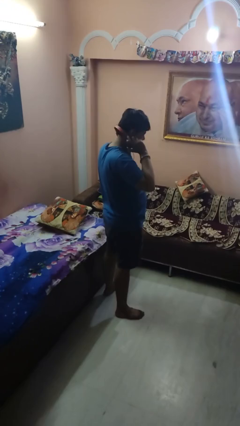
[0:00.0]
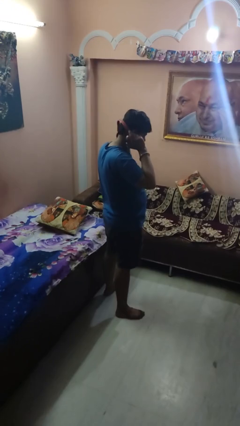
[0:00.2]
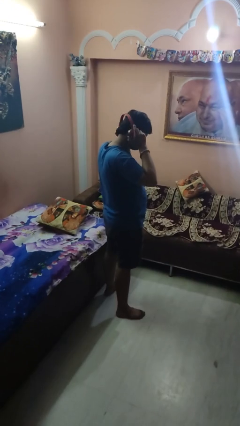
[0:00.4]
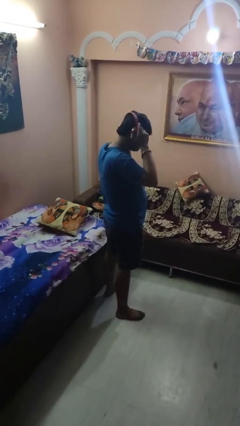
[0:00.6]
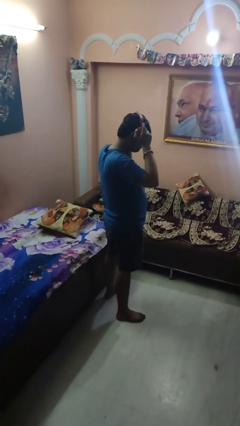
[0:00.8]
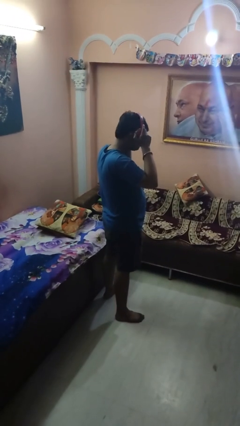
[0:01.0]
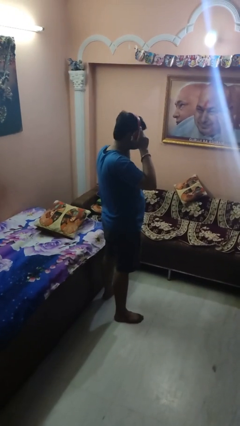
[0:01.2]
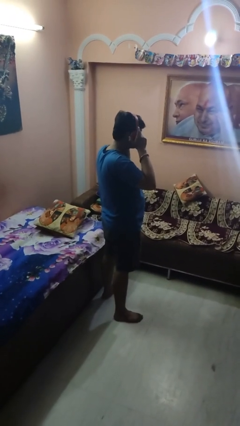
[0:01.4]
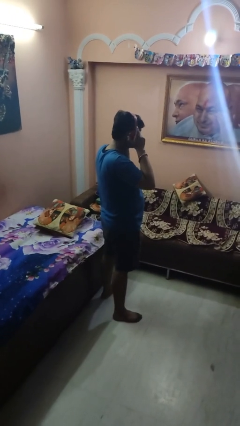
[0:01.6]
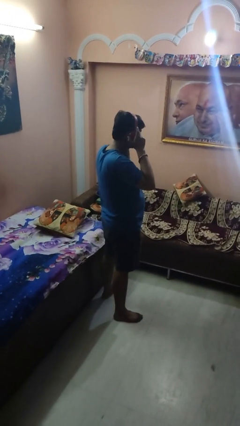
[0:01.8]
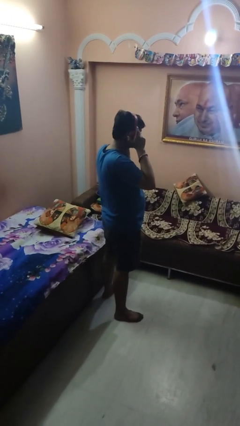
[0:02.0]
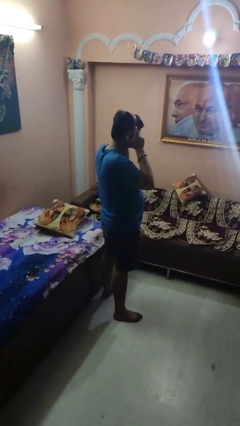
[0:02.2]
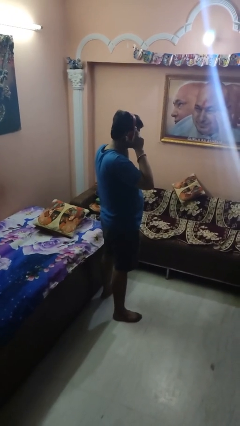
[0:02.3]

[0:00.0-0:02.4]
person puts on headphones

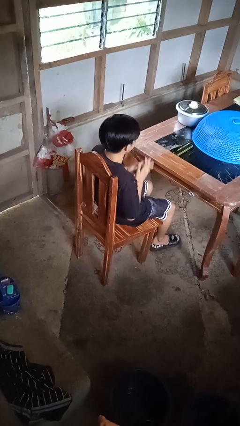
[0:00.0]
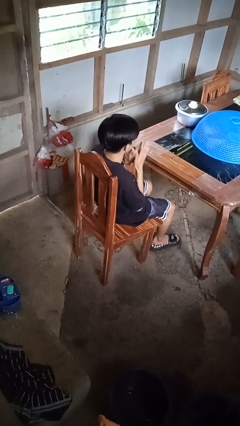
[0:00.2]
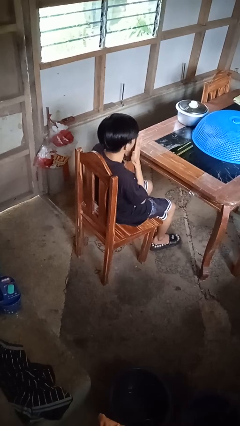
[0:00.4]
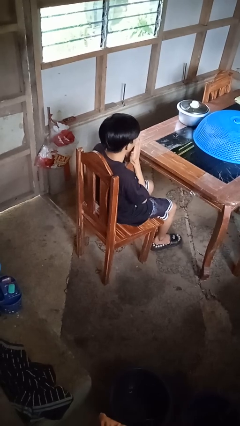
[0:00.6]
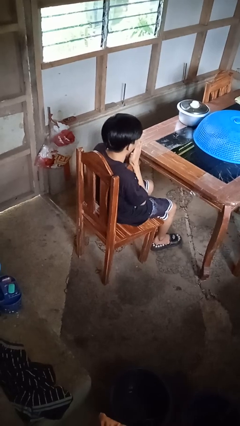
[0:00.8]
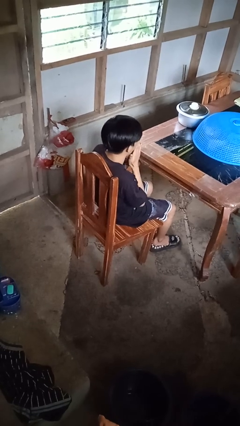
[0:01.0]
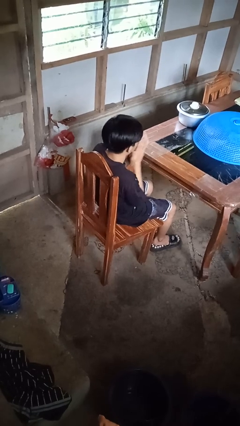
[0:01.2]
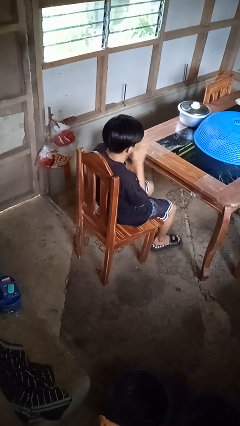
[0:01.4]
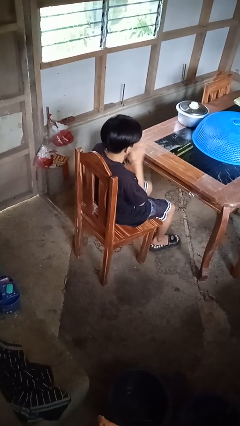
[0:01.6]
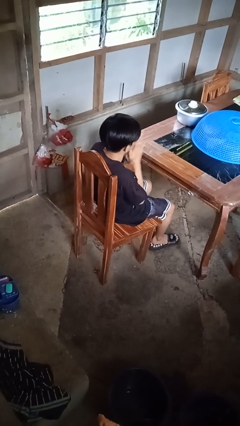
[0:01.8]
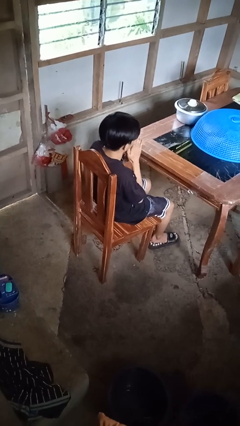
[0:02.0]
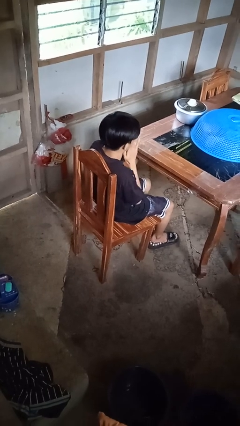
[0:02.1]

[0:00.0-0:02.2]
person blows into hands

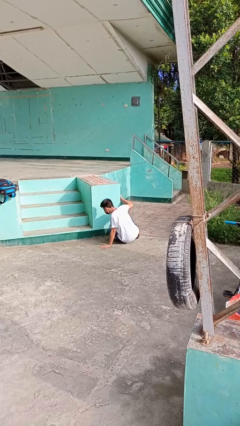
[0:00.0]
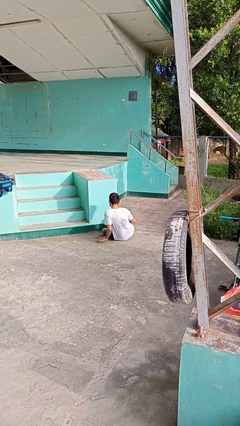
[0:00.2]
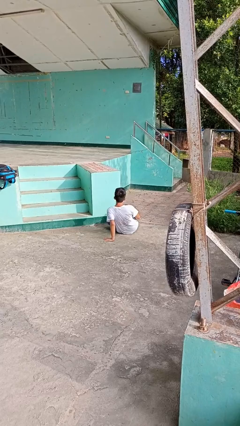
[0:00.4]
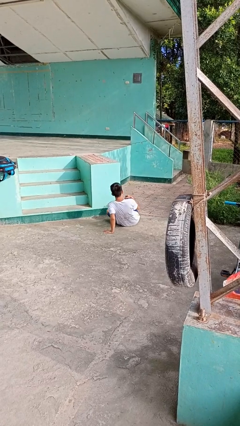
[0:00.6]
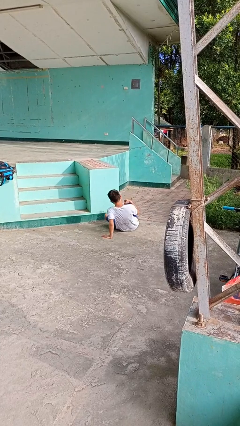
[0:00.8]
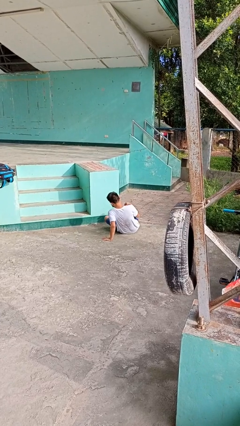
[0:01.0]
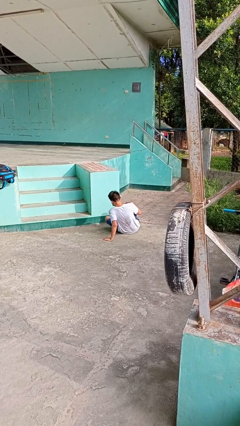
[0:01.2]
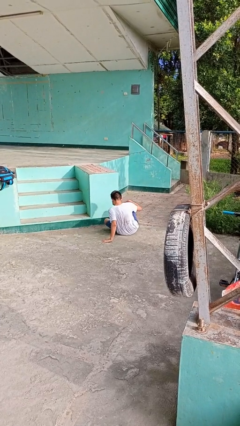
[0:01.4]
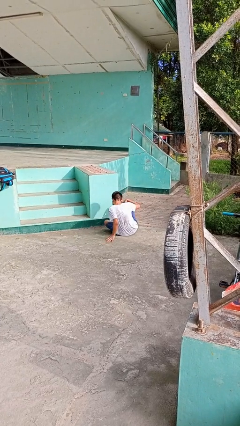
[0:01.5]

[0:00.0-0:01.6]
person lies down on floor

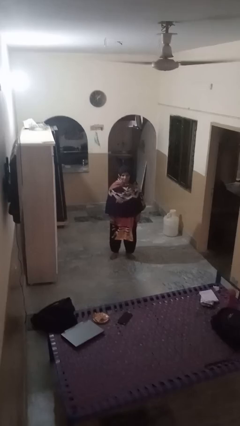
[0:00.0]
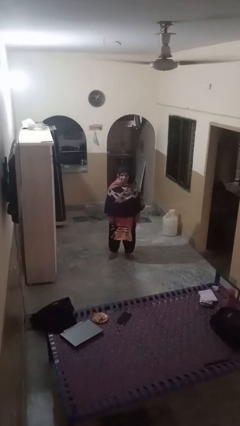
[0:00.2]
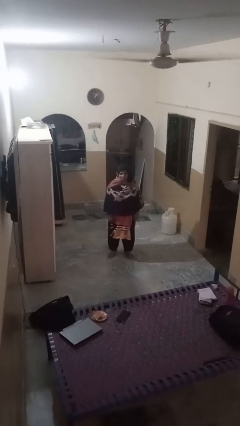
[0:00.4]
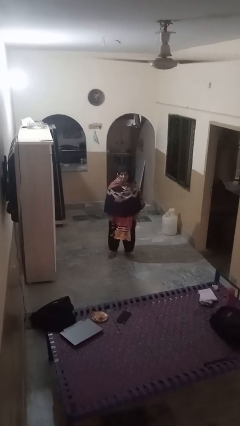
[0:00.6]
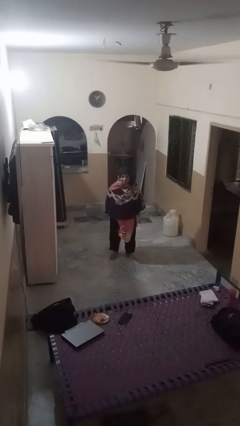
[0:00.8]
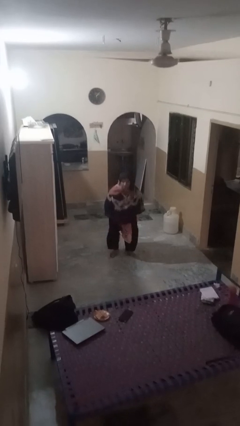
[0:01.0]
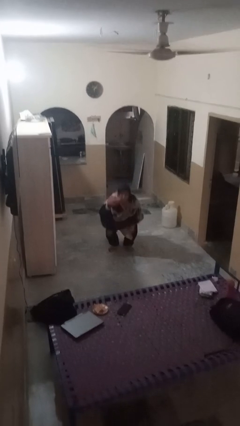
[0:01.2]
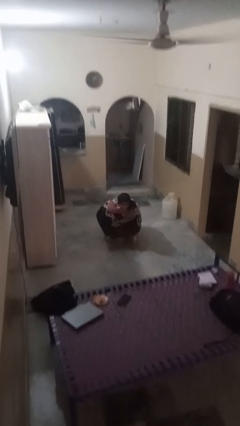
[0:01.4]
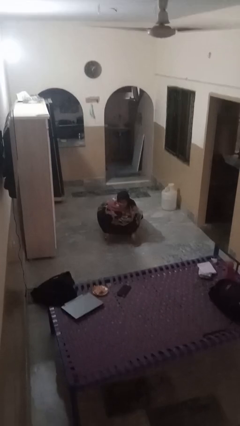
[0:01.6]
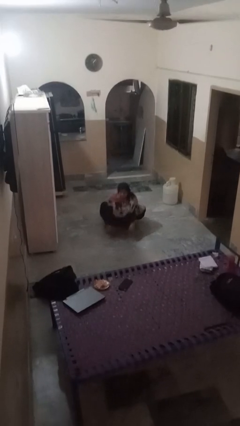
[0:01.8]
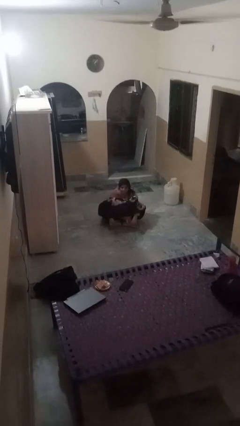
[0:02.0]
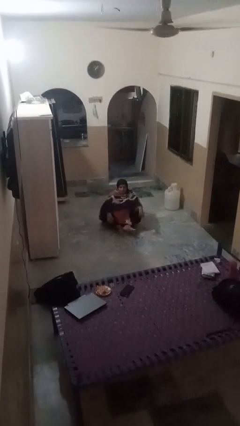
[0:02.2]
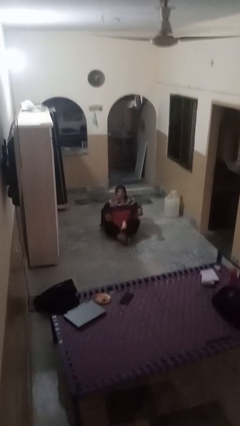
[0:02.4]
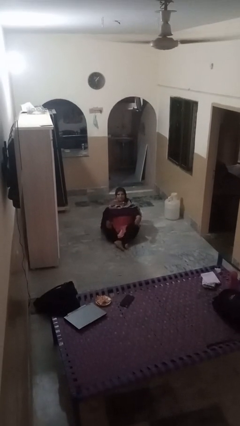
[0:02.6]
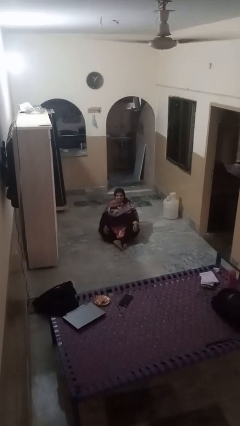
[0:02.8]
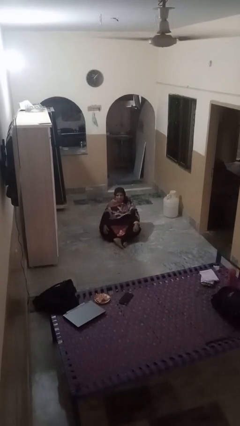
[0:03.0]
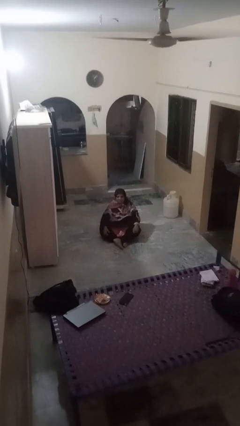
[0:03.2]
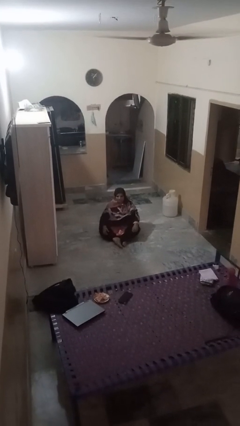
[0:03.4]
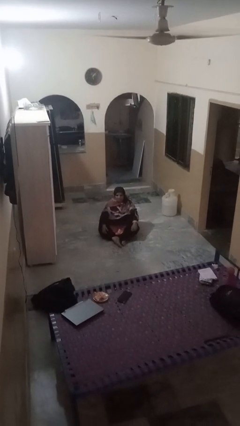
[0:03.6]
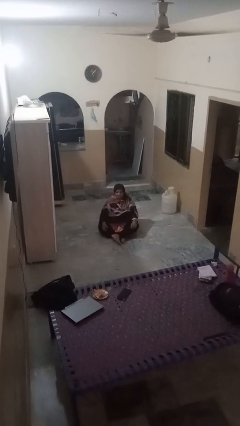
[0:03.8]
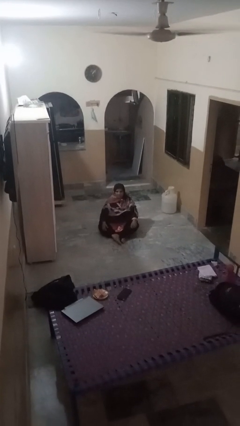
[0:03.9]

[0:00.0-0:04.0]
person sits crisscross

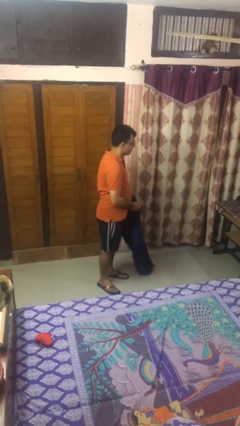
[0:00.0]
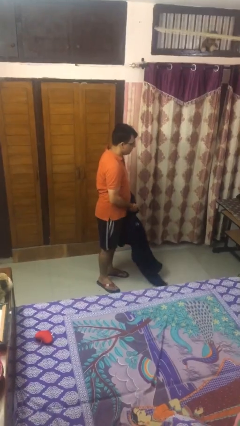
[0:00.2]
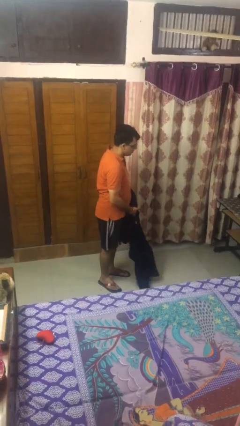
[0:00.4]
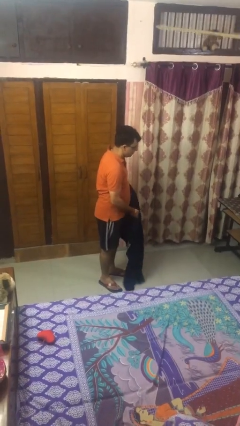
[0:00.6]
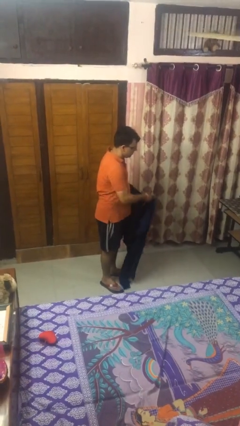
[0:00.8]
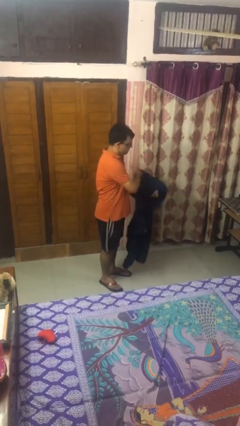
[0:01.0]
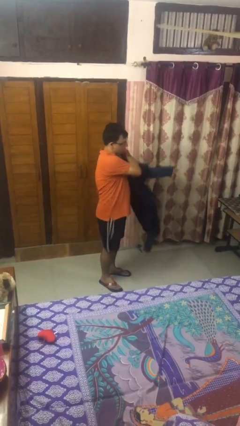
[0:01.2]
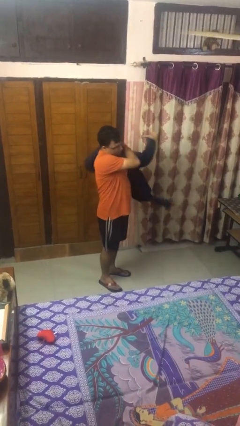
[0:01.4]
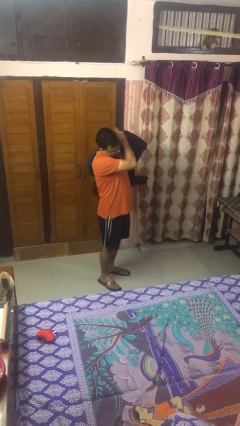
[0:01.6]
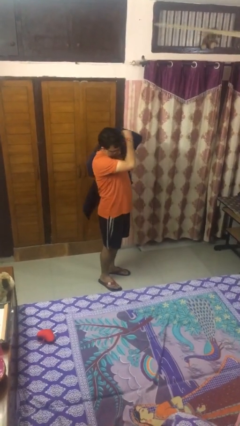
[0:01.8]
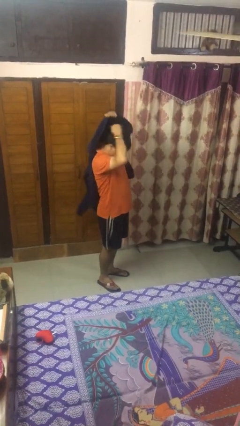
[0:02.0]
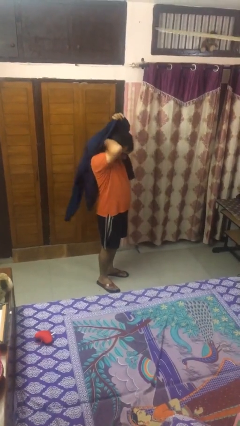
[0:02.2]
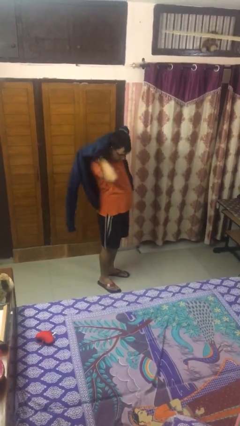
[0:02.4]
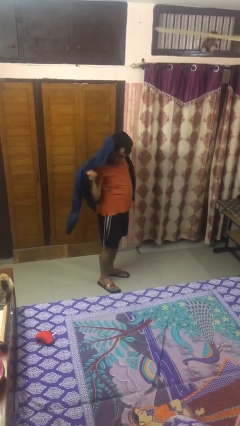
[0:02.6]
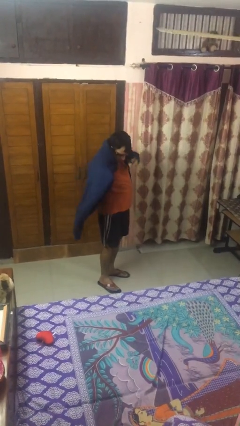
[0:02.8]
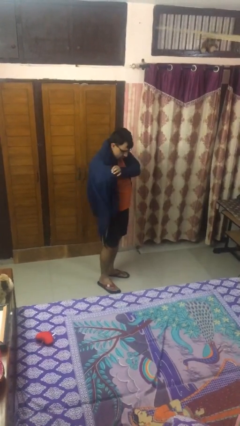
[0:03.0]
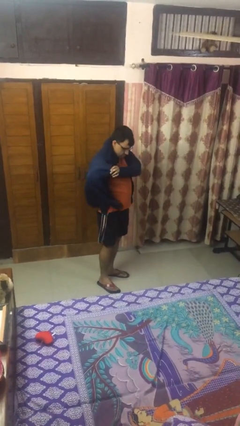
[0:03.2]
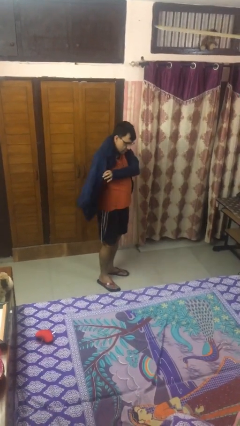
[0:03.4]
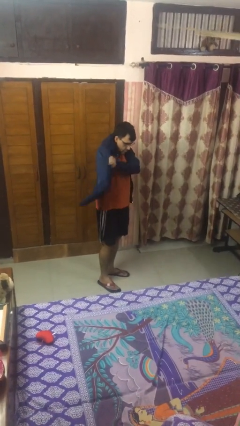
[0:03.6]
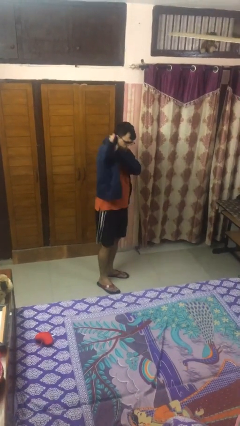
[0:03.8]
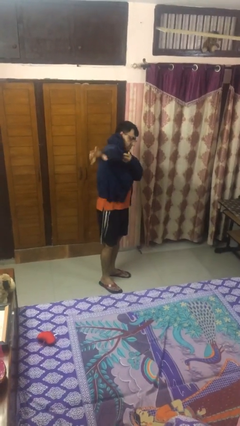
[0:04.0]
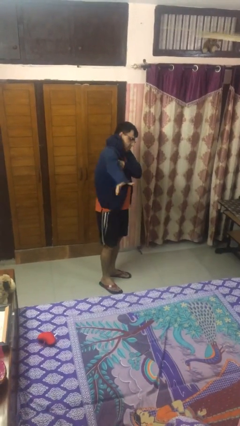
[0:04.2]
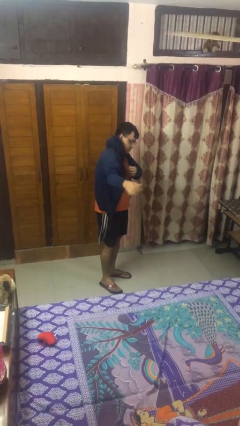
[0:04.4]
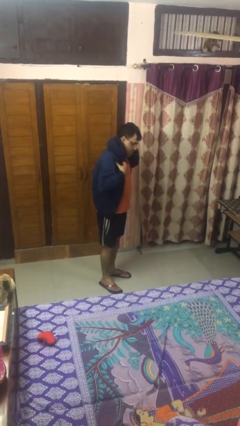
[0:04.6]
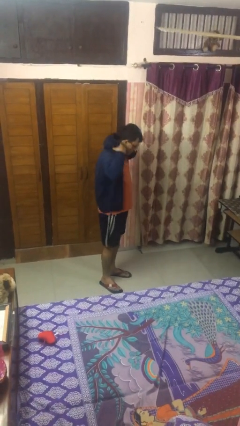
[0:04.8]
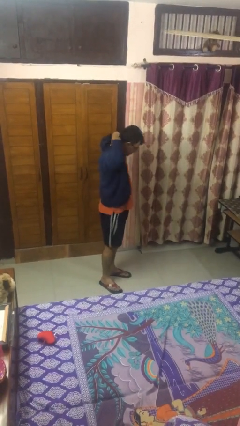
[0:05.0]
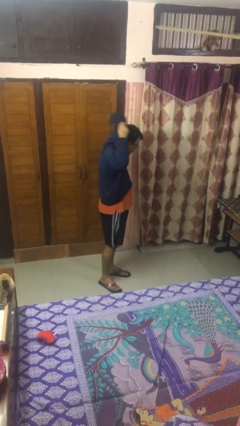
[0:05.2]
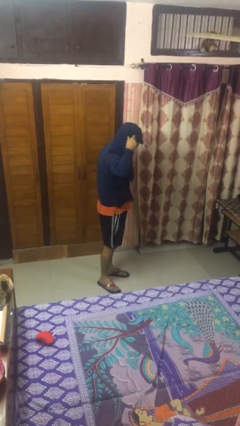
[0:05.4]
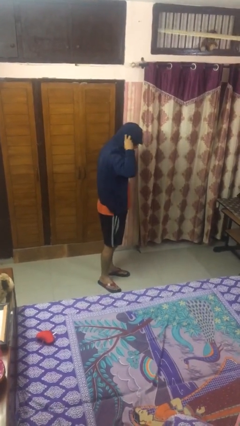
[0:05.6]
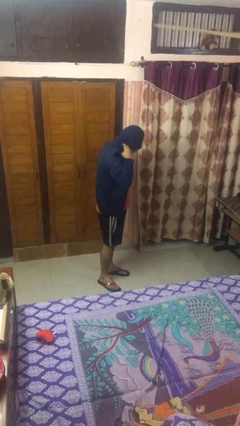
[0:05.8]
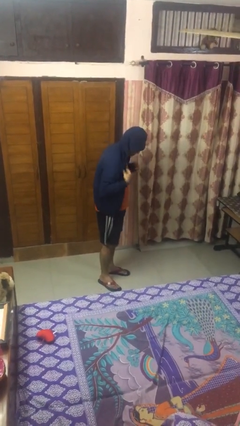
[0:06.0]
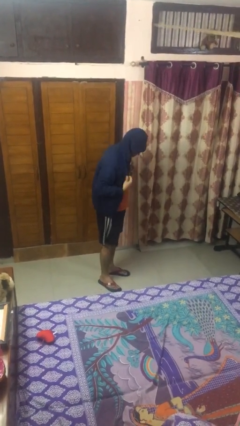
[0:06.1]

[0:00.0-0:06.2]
person puts on hoodie

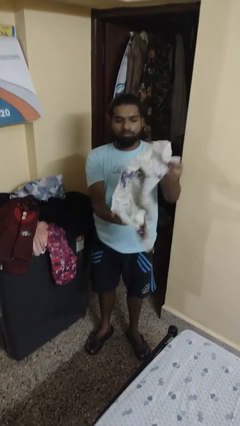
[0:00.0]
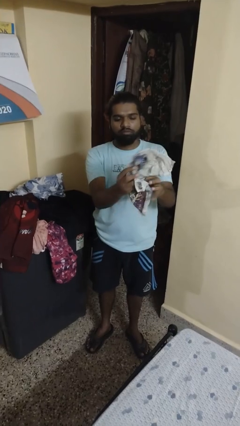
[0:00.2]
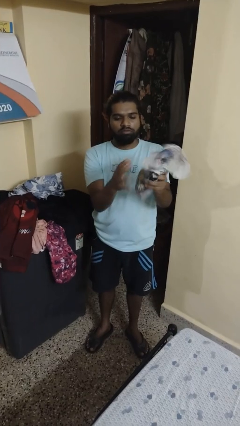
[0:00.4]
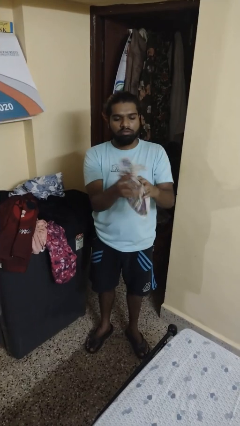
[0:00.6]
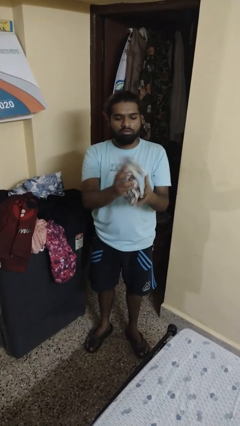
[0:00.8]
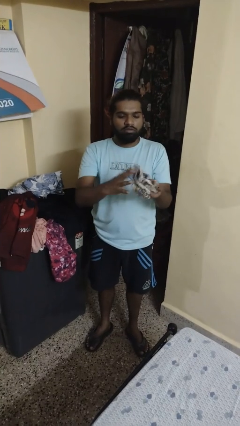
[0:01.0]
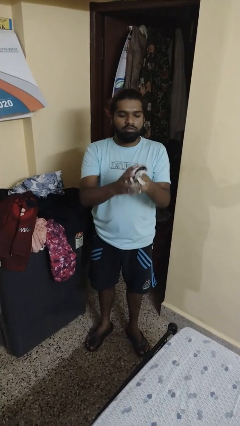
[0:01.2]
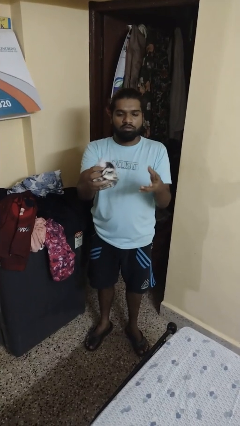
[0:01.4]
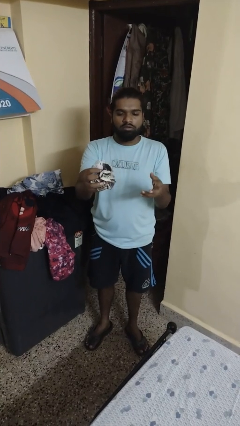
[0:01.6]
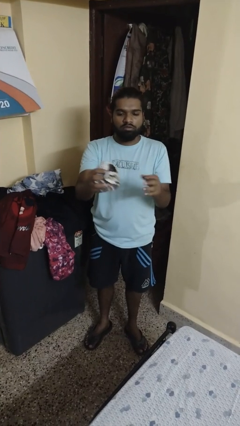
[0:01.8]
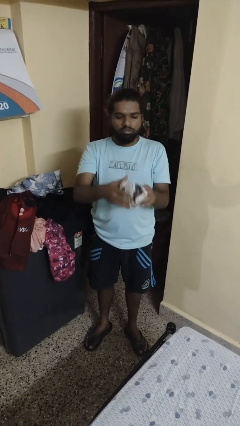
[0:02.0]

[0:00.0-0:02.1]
person crumples paper
